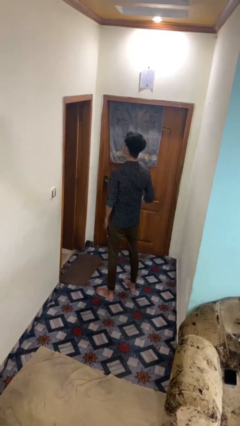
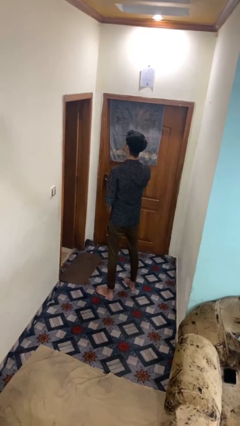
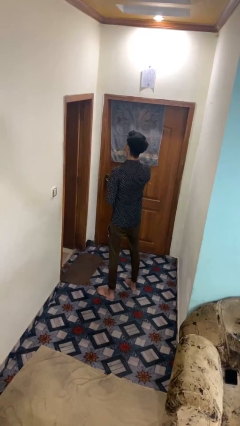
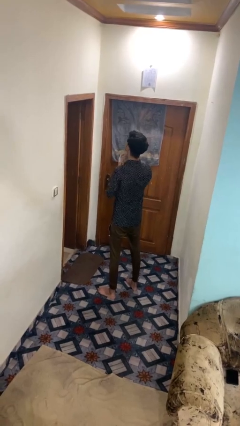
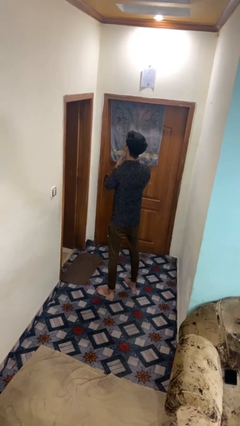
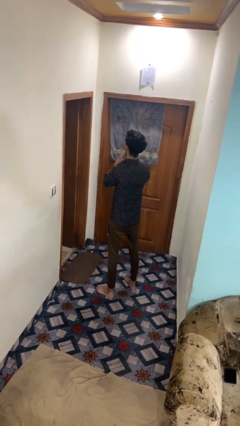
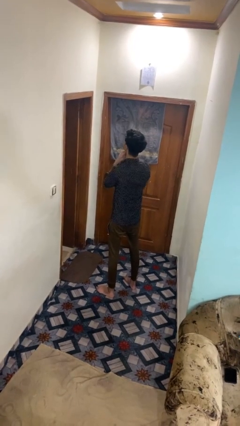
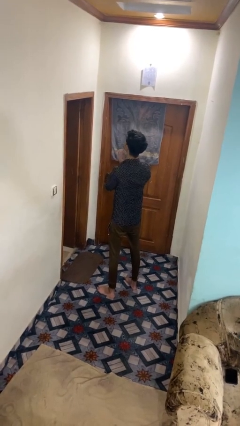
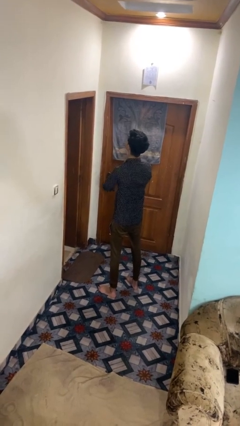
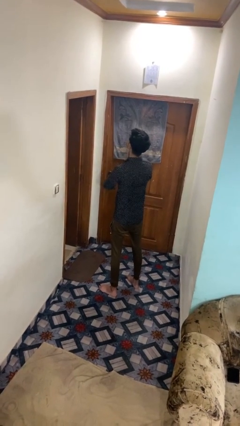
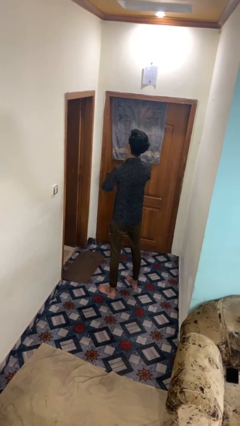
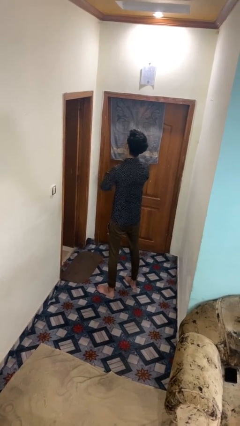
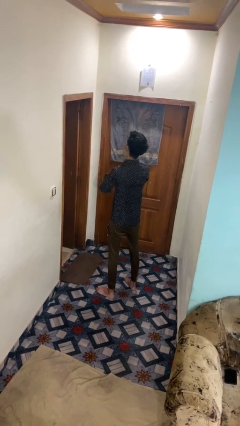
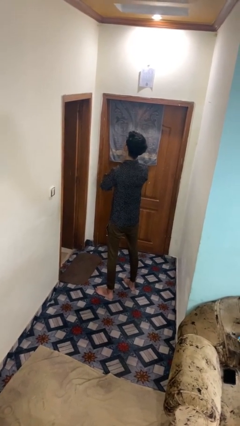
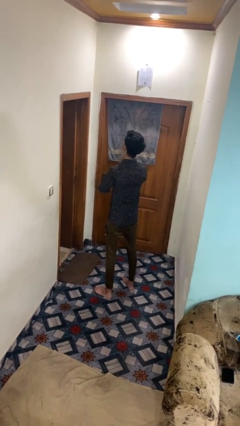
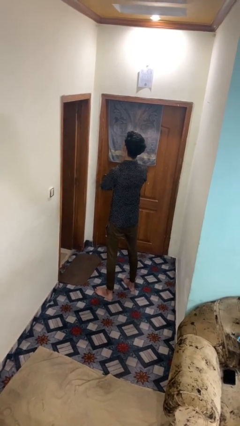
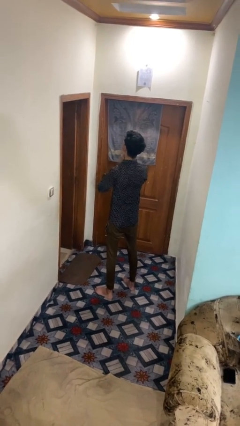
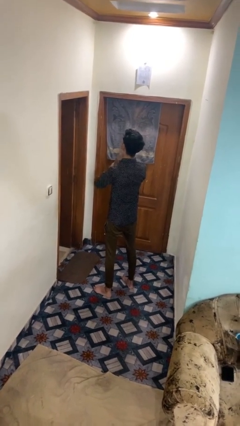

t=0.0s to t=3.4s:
person rubs neck

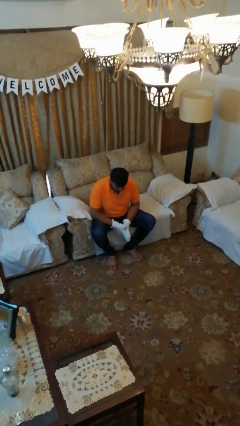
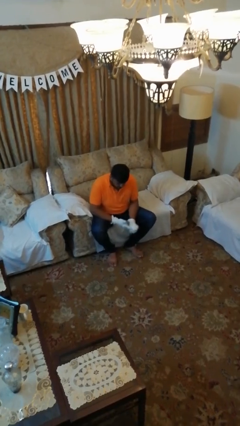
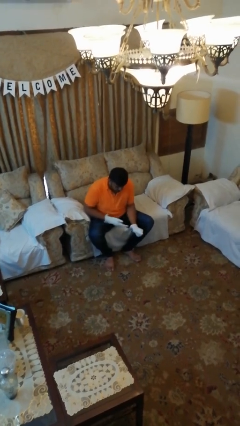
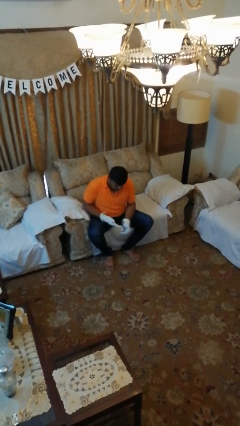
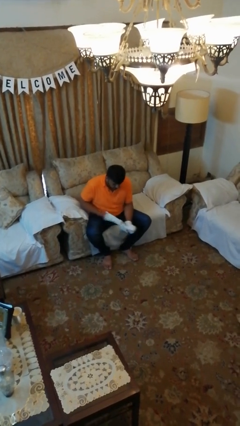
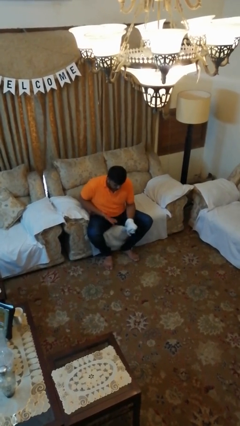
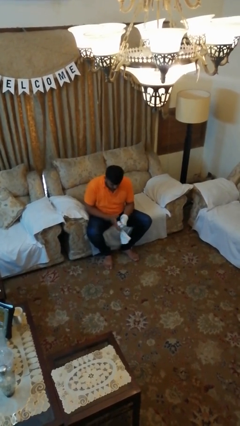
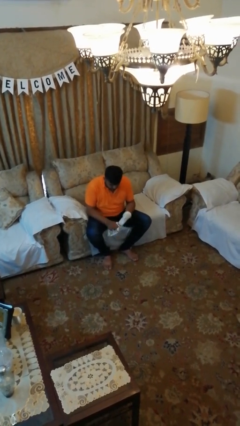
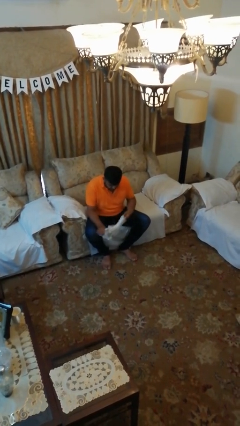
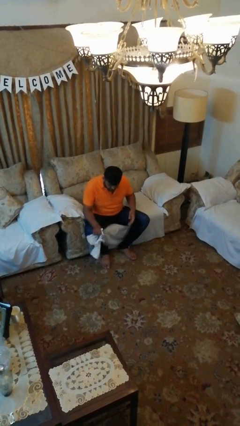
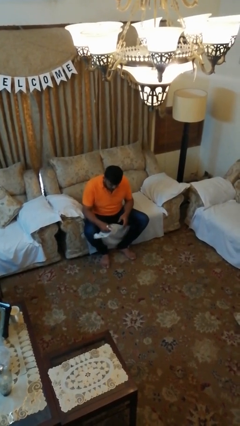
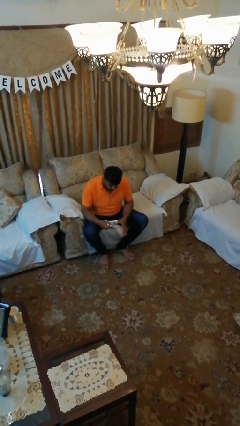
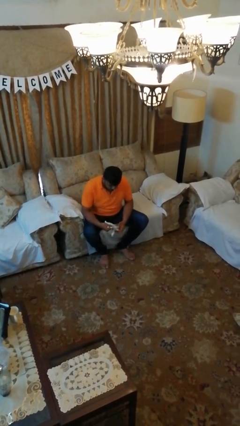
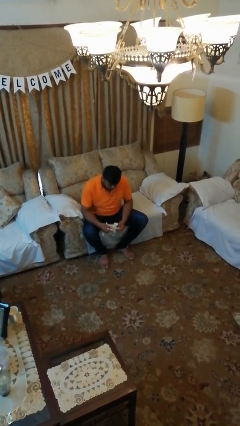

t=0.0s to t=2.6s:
person takes off gloves

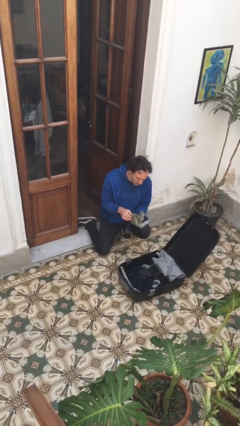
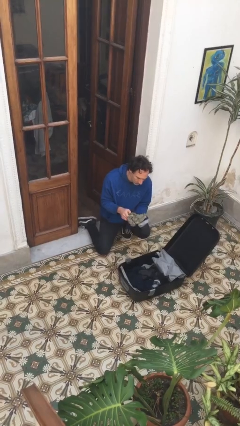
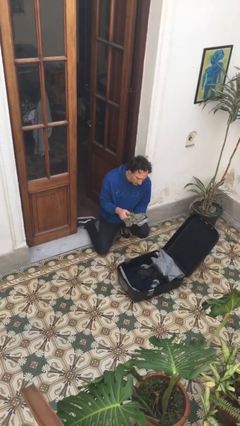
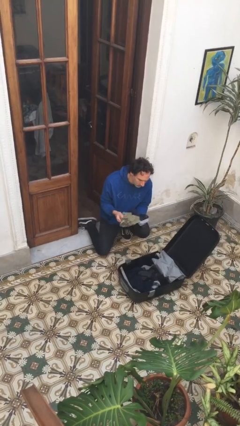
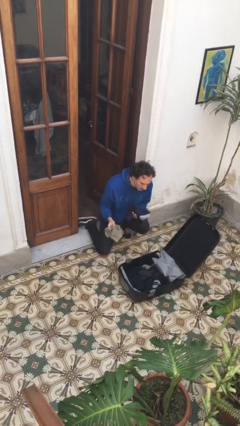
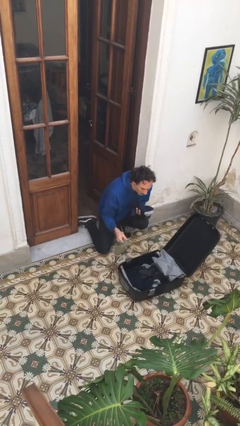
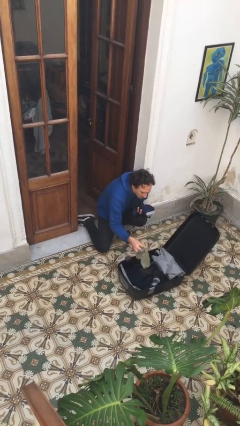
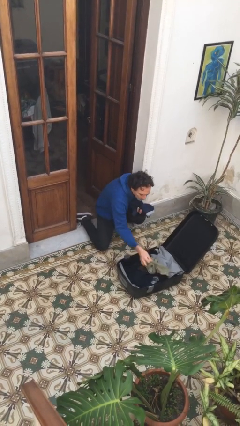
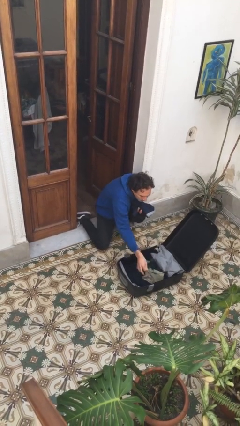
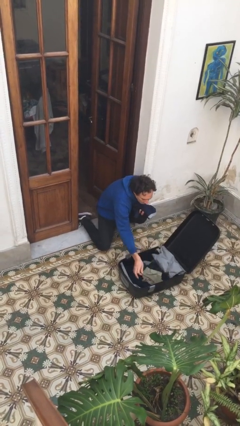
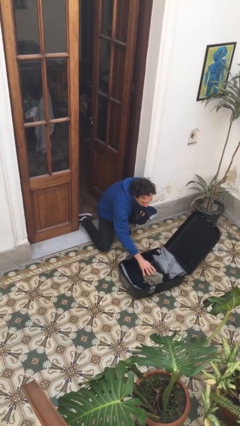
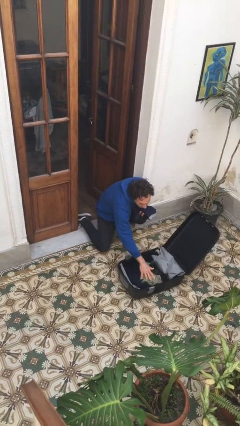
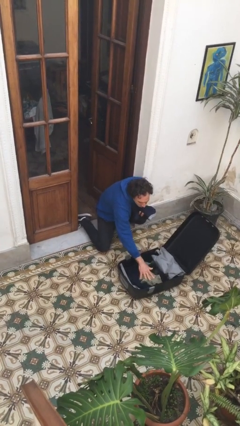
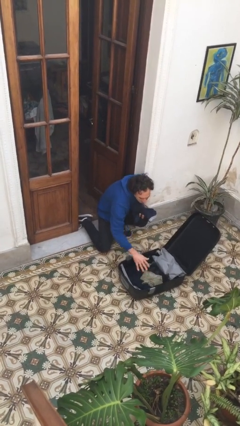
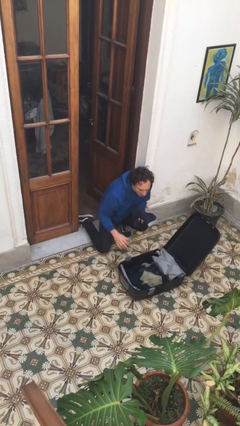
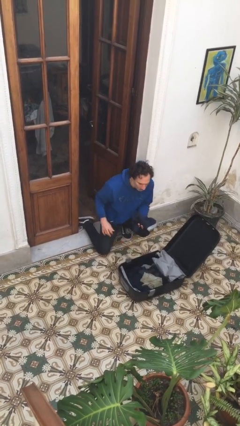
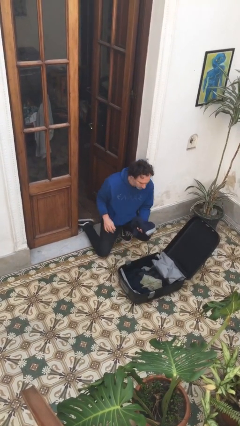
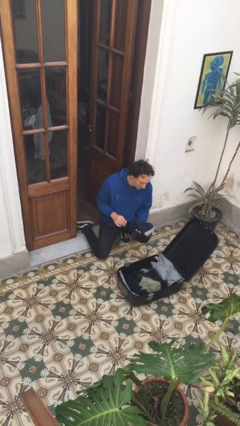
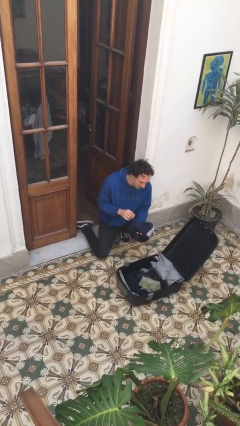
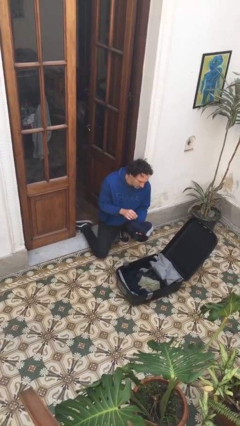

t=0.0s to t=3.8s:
person loads clothes into suitcase

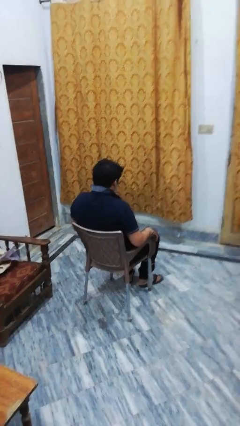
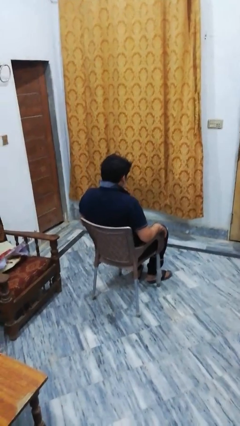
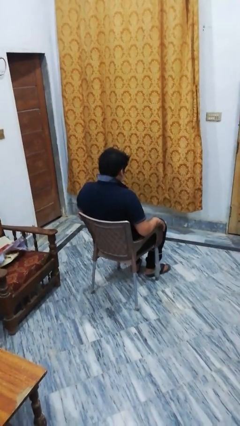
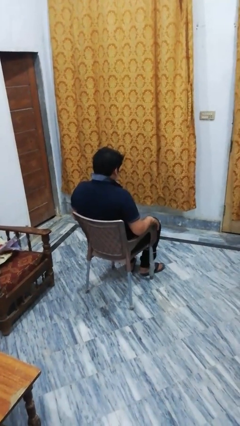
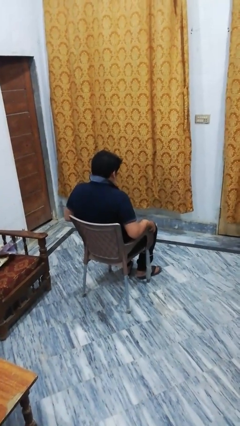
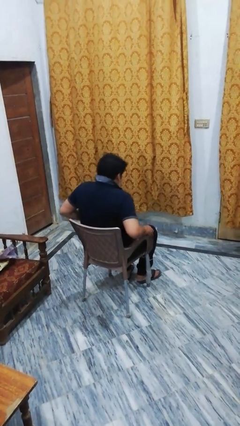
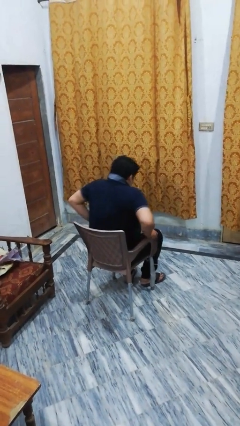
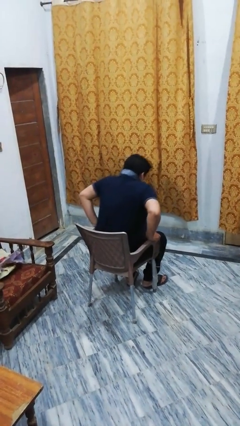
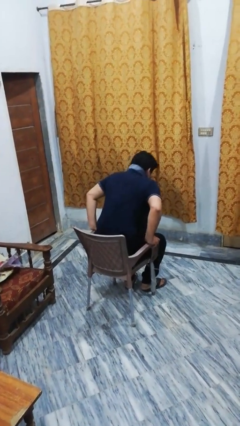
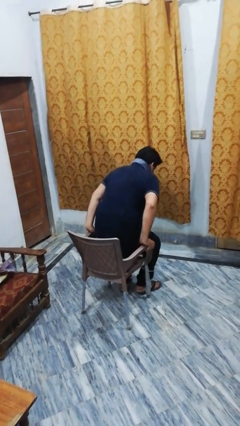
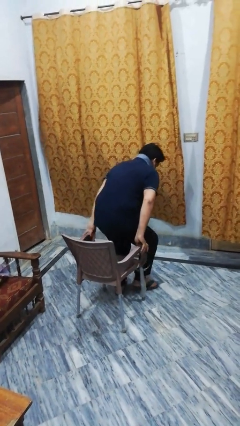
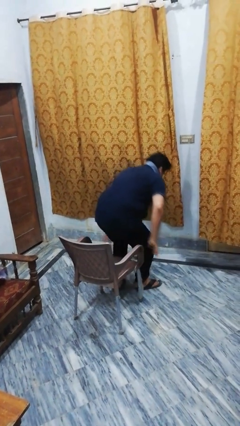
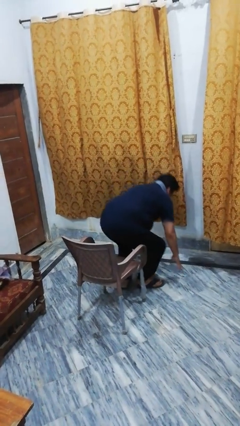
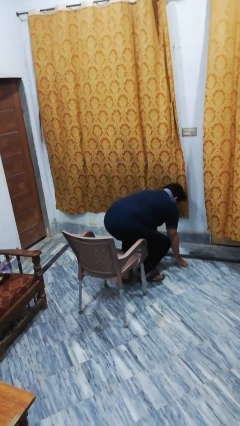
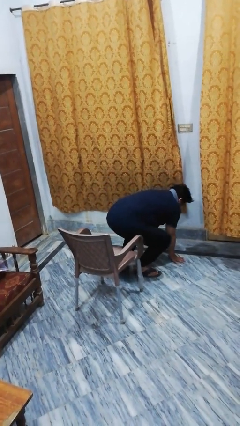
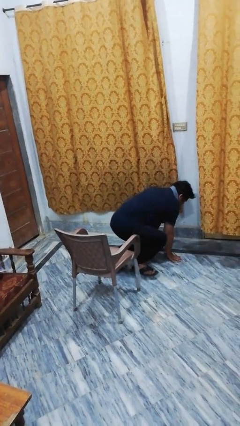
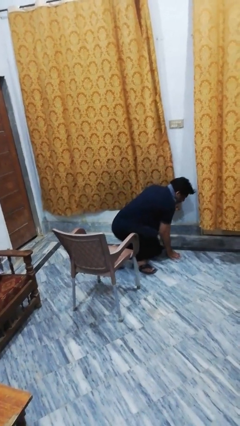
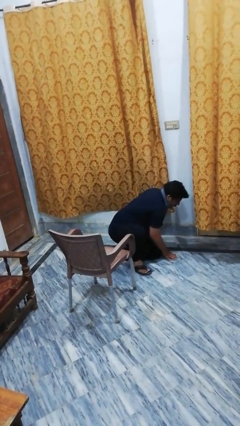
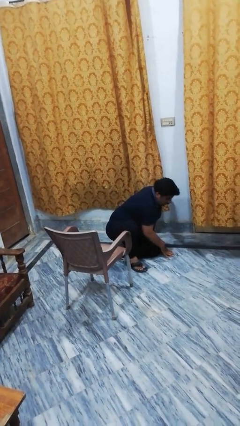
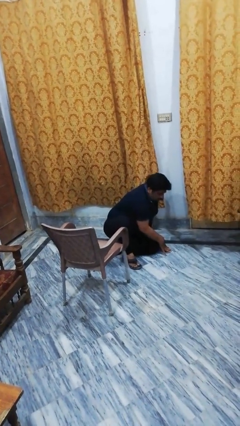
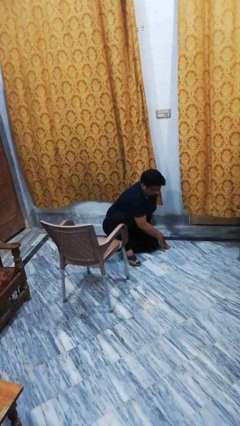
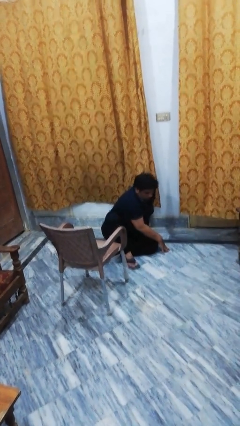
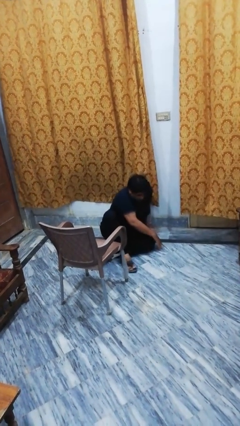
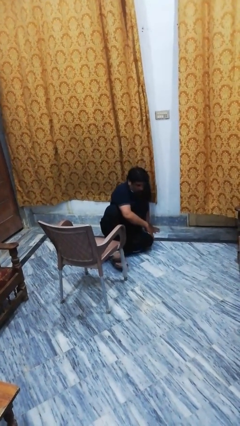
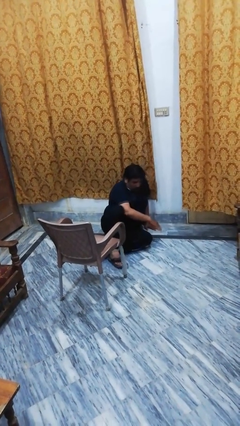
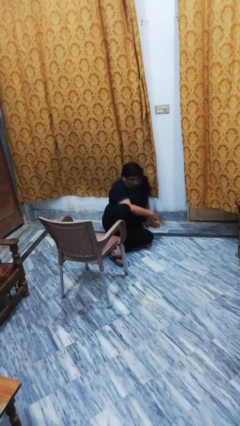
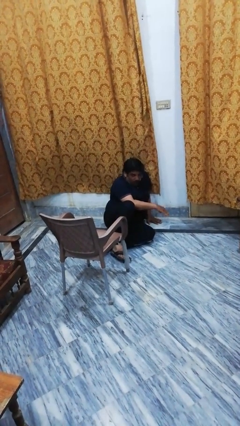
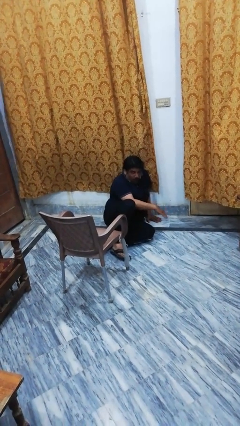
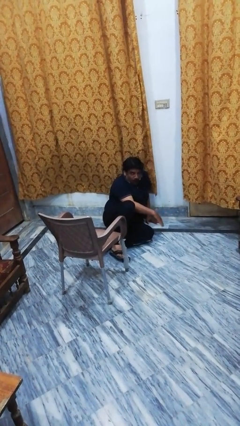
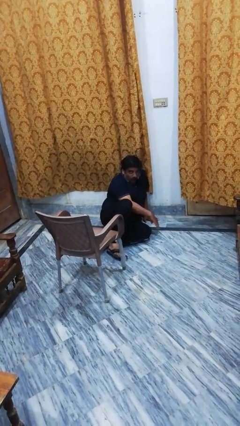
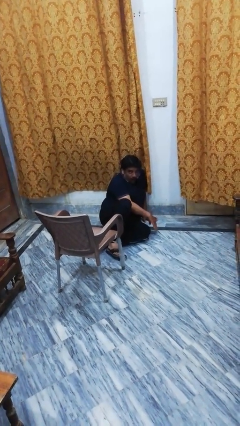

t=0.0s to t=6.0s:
person falls from chair

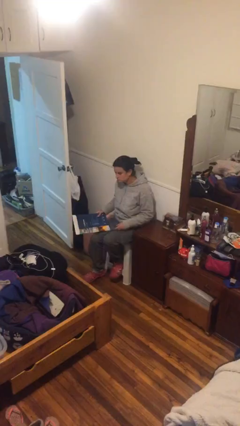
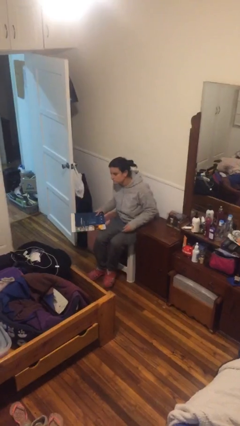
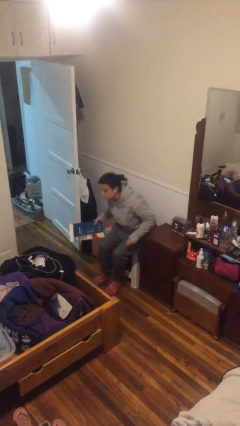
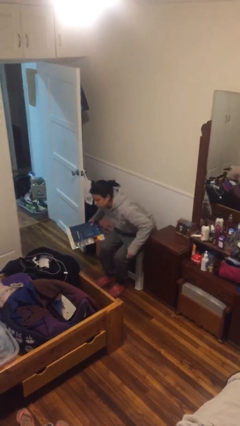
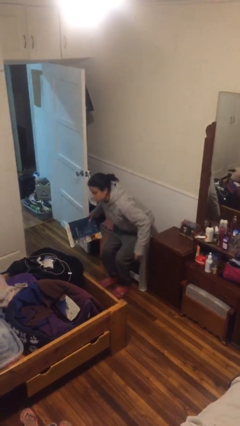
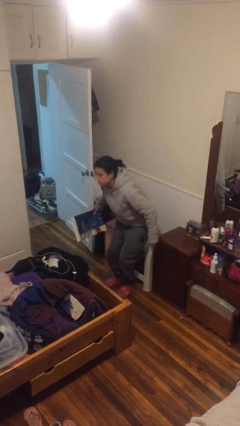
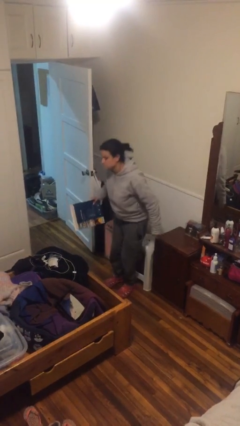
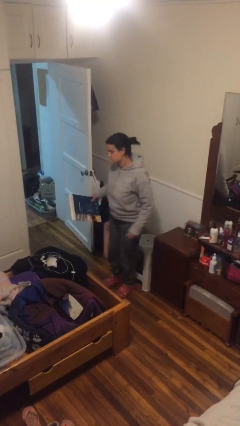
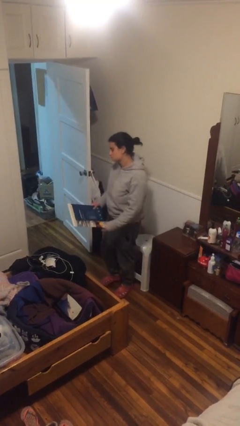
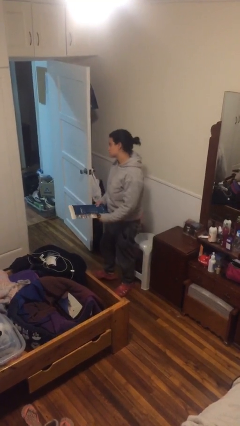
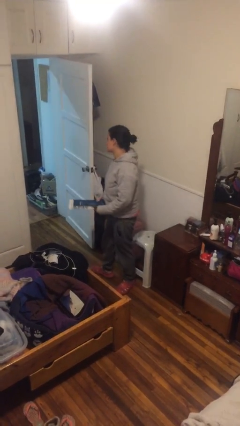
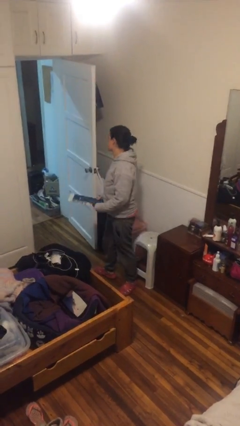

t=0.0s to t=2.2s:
person stands up
